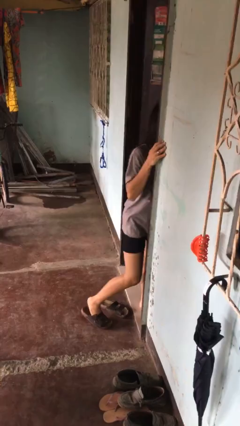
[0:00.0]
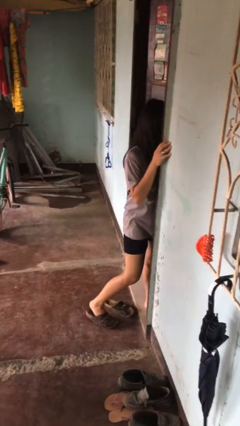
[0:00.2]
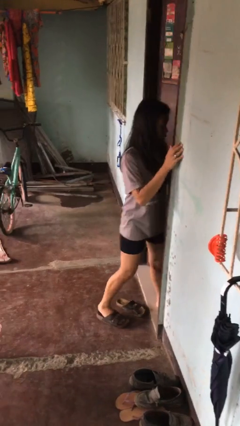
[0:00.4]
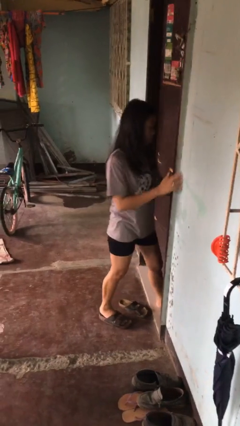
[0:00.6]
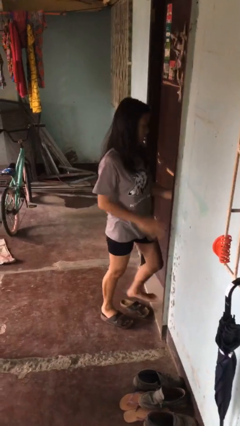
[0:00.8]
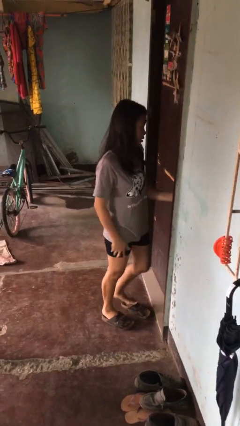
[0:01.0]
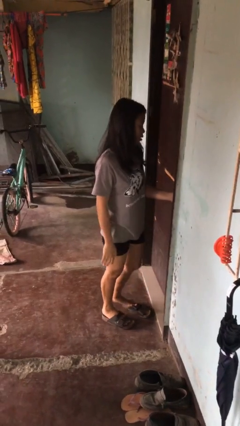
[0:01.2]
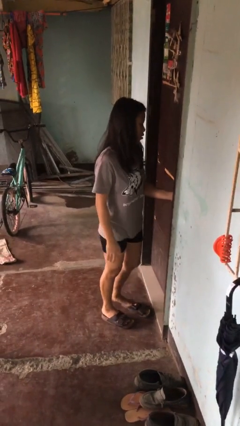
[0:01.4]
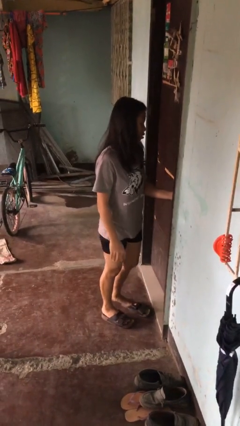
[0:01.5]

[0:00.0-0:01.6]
person closes facility door

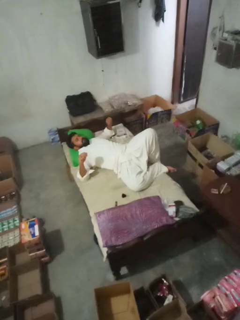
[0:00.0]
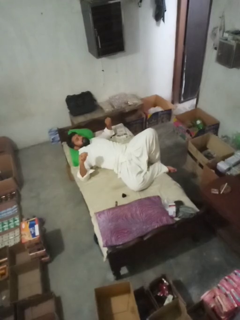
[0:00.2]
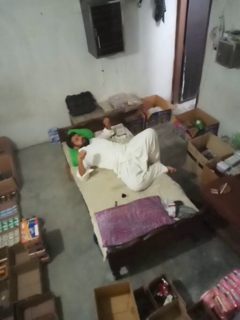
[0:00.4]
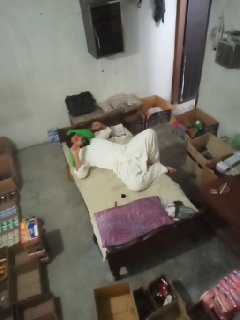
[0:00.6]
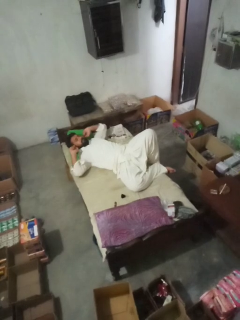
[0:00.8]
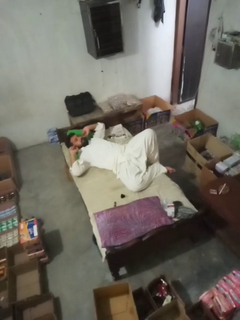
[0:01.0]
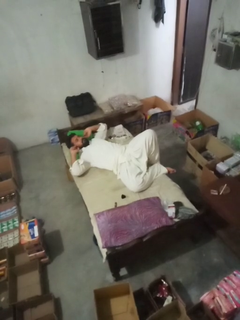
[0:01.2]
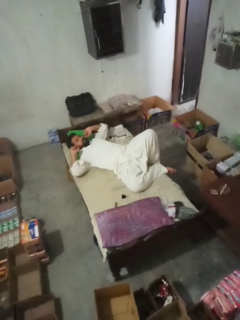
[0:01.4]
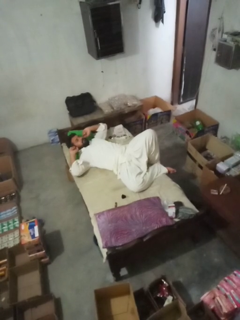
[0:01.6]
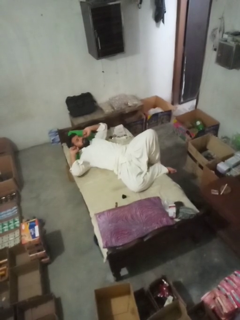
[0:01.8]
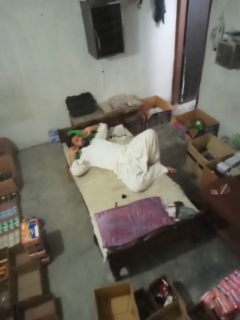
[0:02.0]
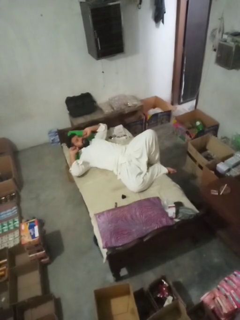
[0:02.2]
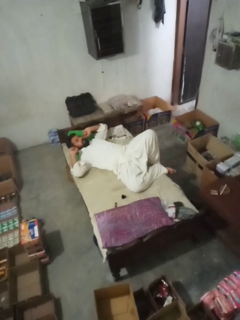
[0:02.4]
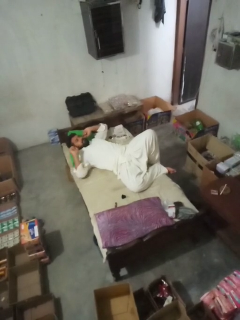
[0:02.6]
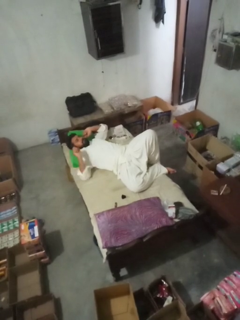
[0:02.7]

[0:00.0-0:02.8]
person puts fingers in ear

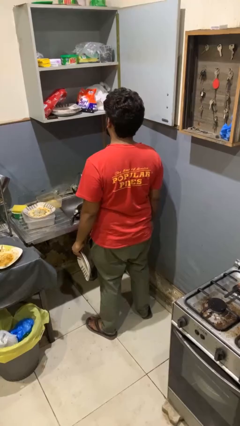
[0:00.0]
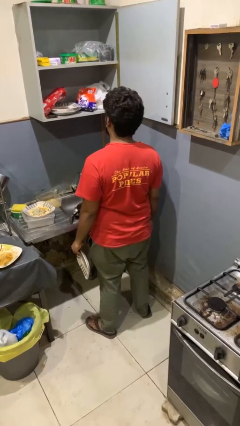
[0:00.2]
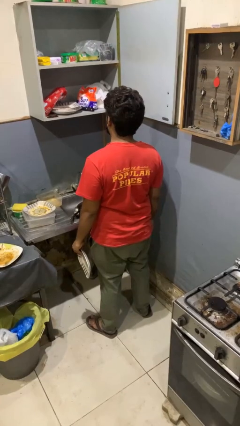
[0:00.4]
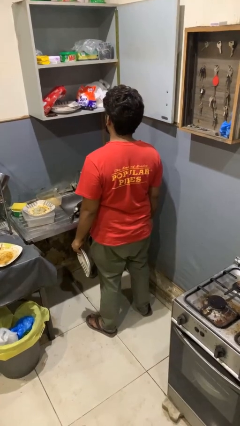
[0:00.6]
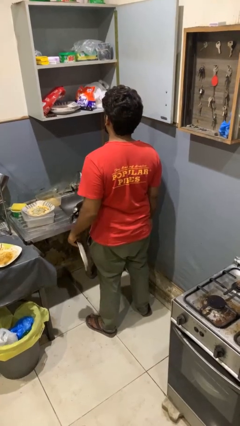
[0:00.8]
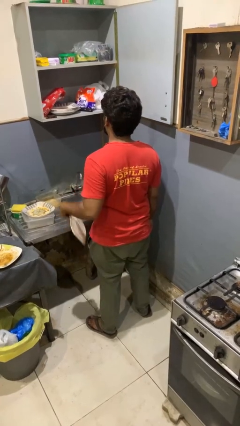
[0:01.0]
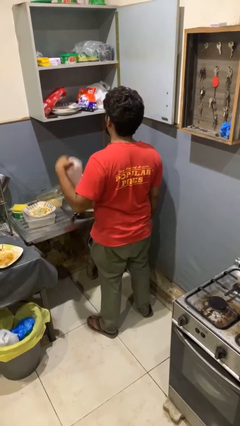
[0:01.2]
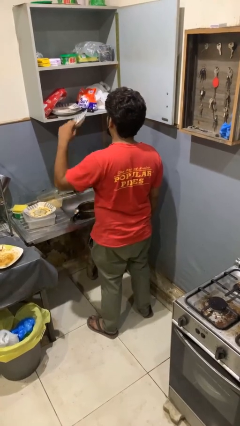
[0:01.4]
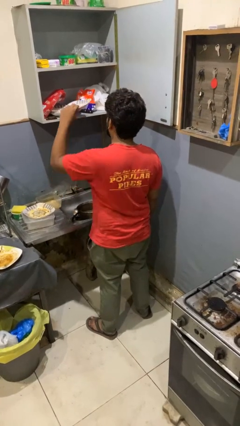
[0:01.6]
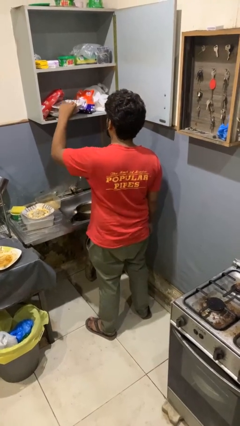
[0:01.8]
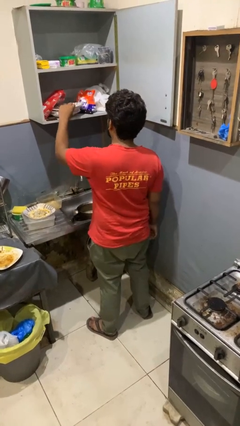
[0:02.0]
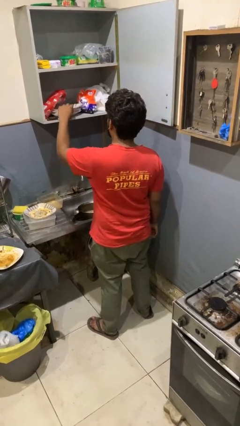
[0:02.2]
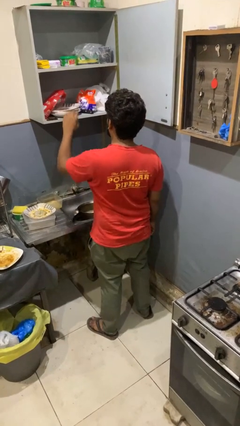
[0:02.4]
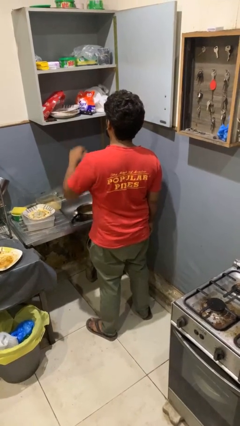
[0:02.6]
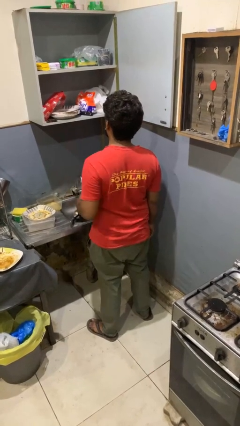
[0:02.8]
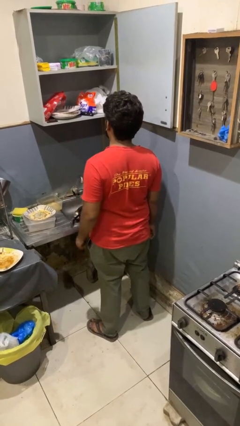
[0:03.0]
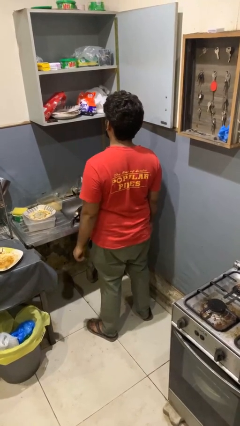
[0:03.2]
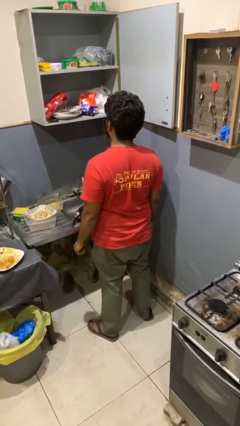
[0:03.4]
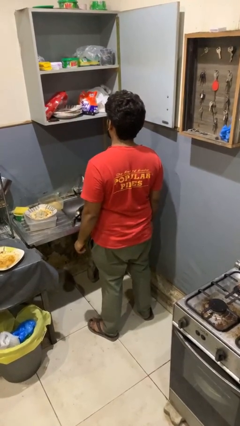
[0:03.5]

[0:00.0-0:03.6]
person puts object in cabinet

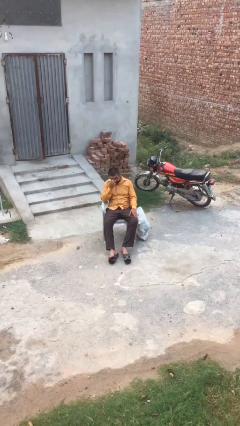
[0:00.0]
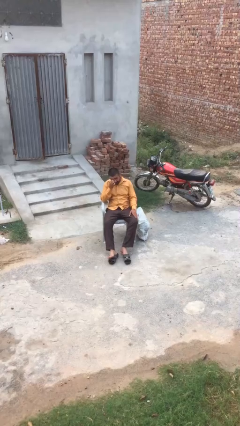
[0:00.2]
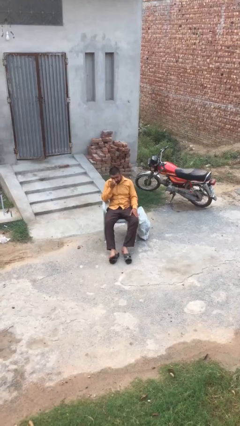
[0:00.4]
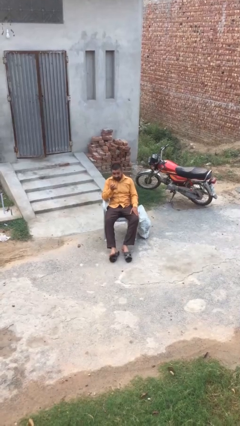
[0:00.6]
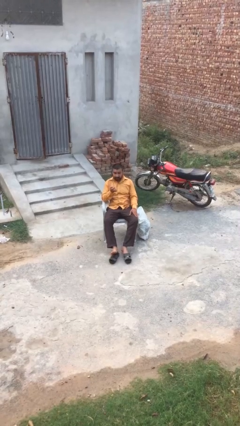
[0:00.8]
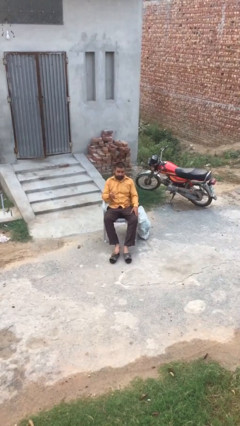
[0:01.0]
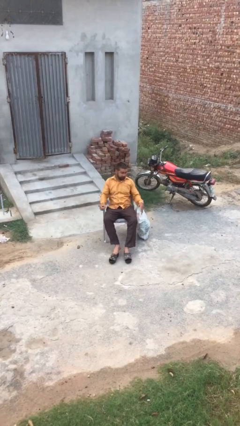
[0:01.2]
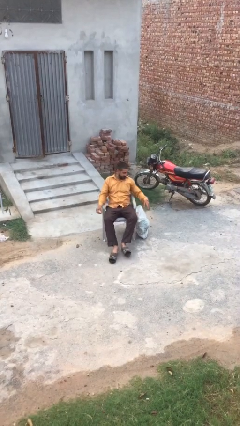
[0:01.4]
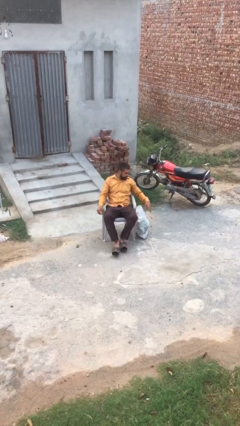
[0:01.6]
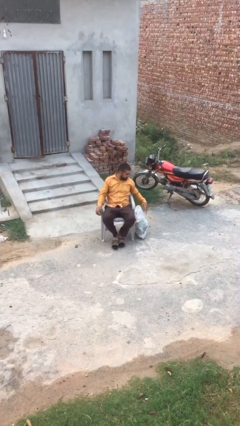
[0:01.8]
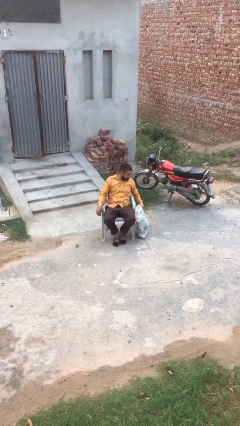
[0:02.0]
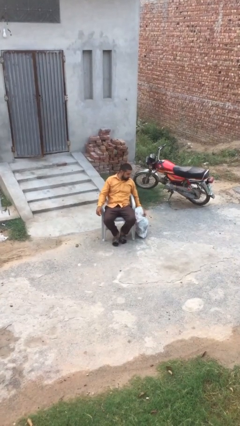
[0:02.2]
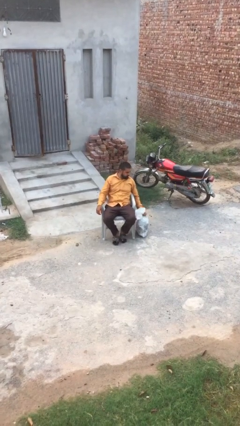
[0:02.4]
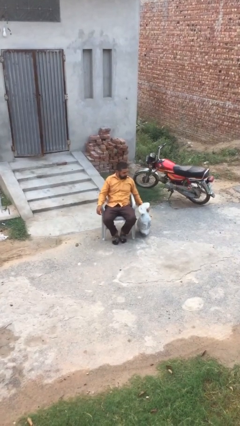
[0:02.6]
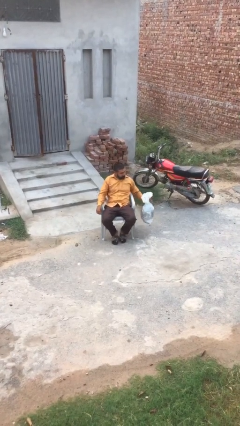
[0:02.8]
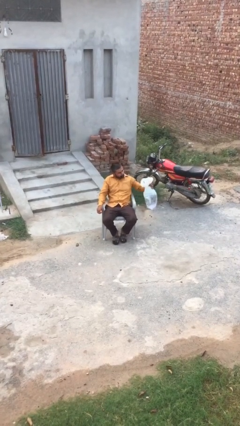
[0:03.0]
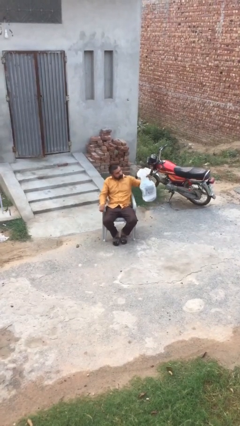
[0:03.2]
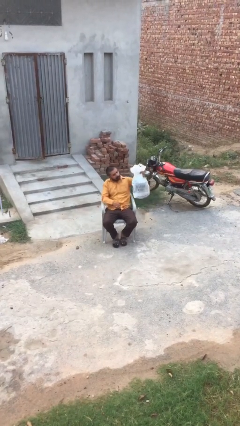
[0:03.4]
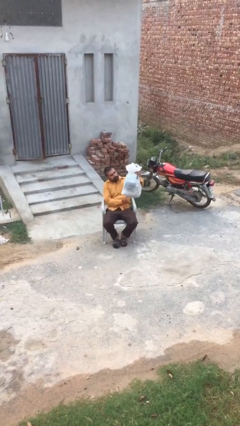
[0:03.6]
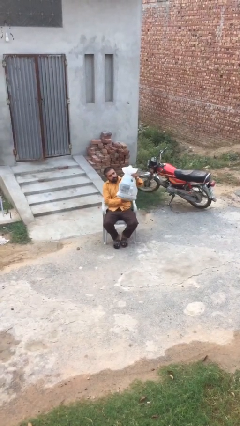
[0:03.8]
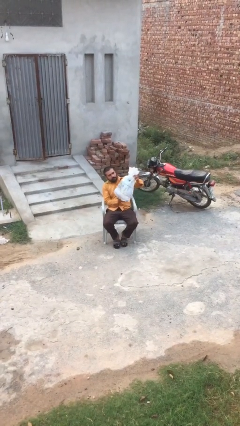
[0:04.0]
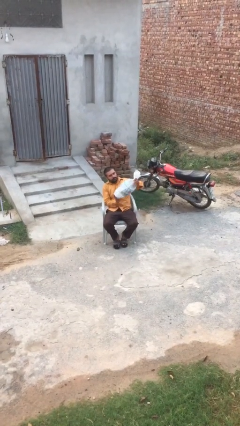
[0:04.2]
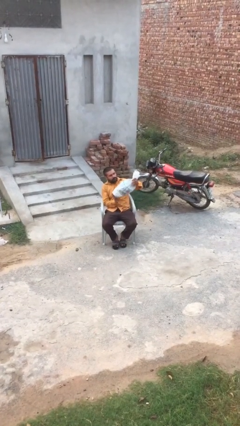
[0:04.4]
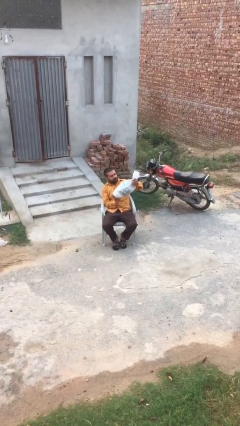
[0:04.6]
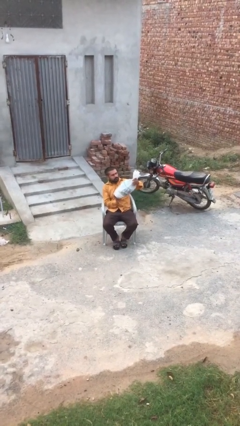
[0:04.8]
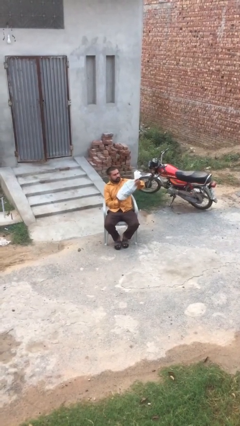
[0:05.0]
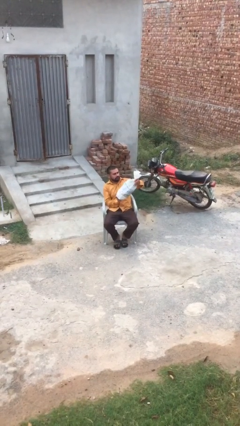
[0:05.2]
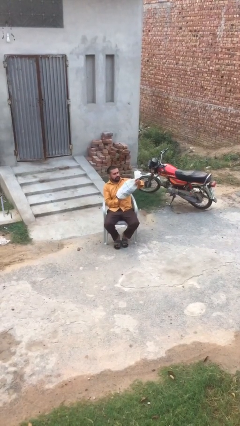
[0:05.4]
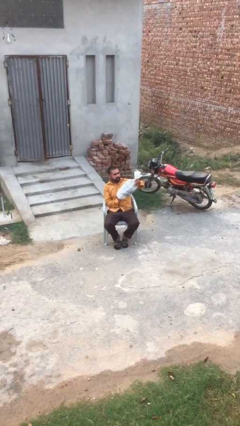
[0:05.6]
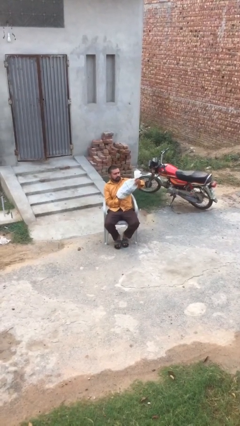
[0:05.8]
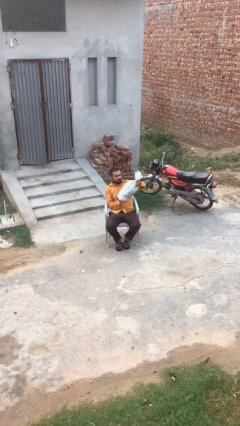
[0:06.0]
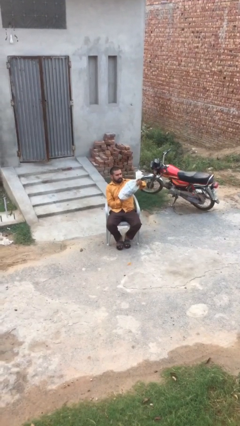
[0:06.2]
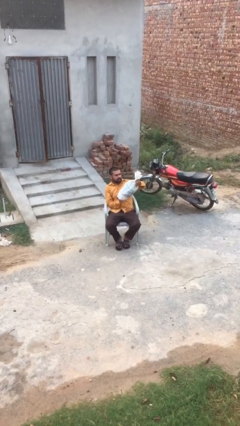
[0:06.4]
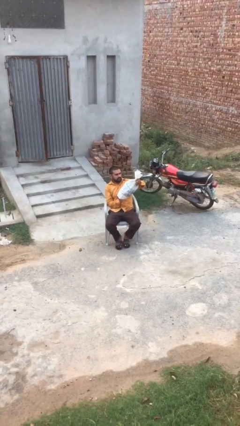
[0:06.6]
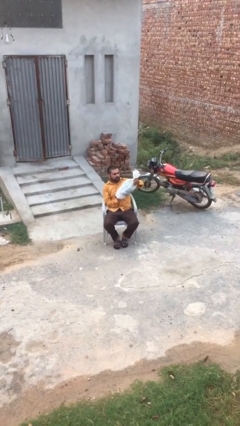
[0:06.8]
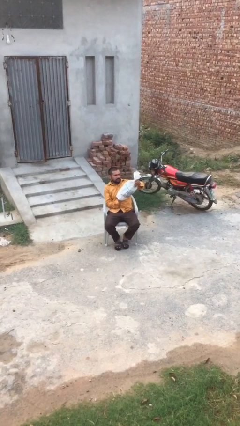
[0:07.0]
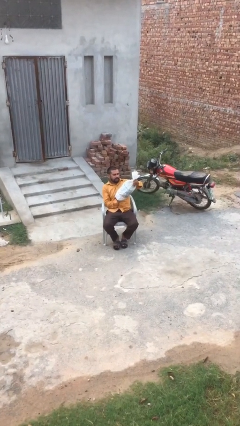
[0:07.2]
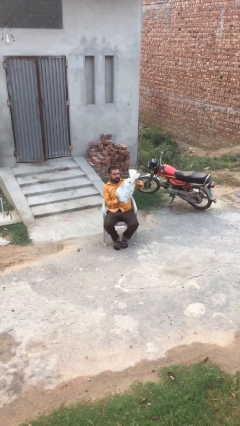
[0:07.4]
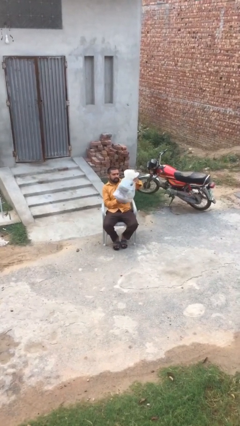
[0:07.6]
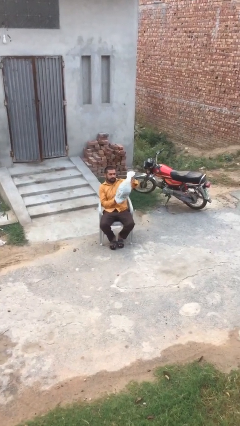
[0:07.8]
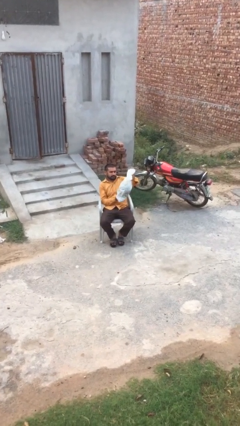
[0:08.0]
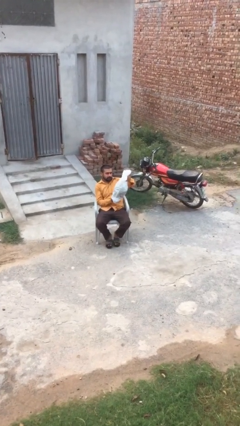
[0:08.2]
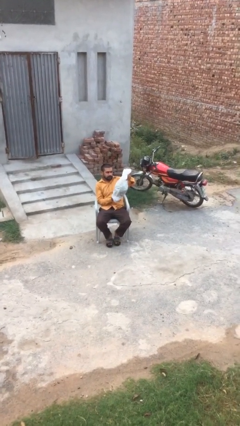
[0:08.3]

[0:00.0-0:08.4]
person picks up object from floor

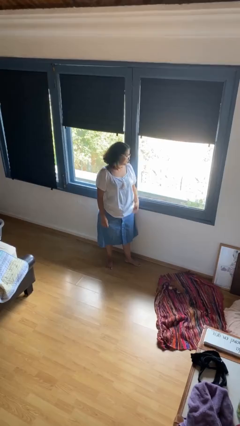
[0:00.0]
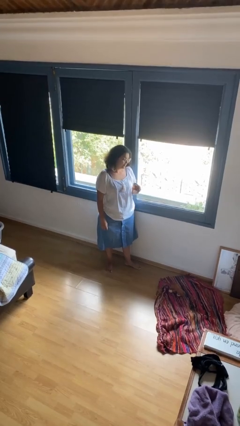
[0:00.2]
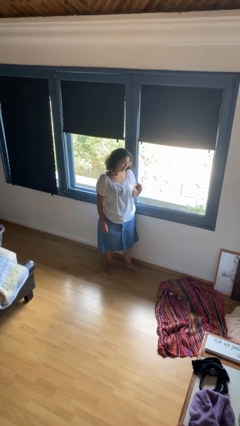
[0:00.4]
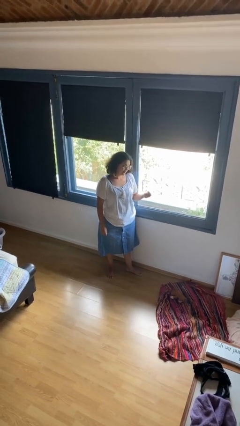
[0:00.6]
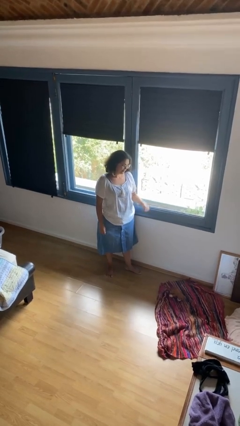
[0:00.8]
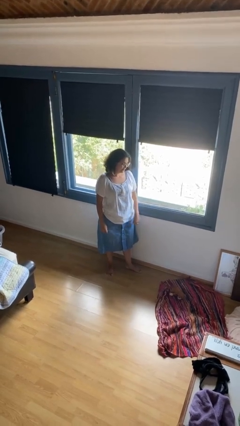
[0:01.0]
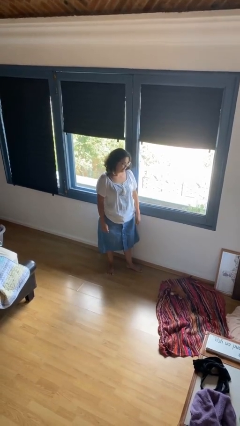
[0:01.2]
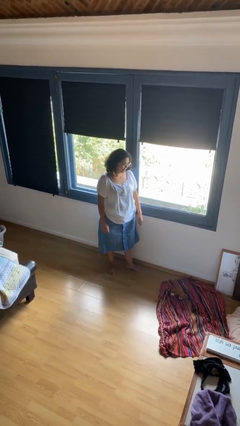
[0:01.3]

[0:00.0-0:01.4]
person snaps fingers

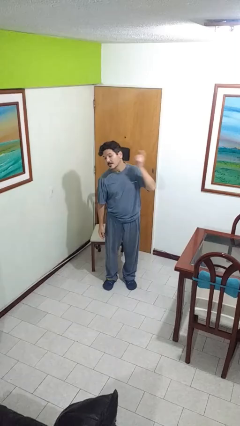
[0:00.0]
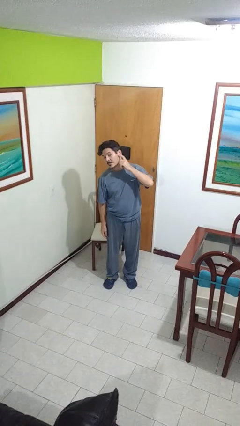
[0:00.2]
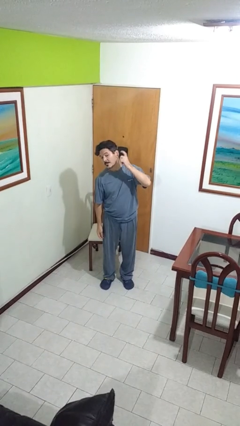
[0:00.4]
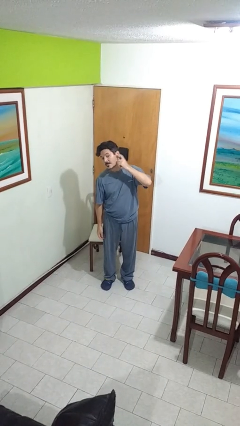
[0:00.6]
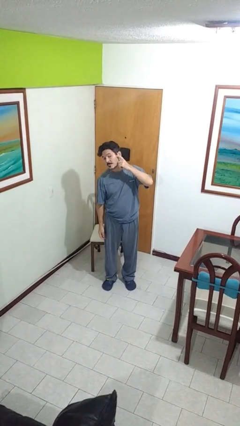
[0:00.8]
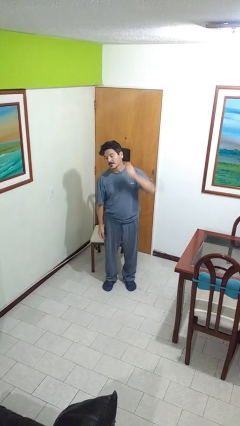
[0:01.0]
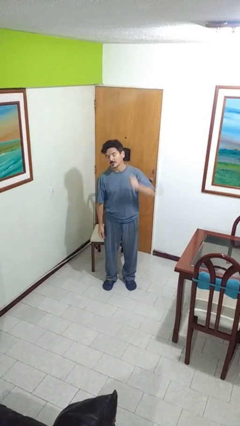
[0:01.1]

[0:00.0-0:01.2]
person gestures listen closely
